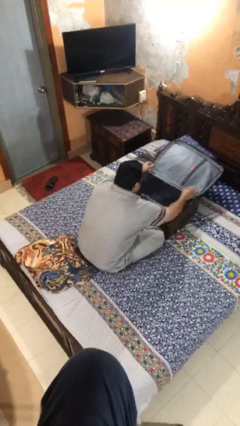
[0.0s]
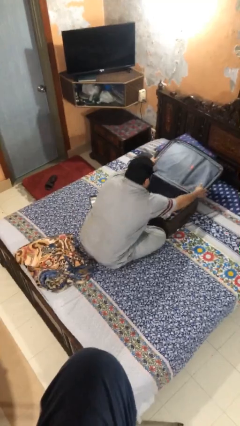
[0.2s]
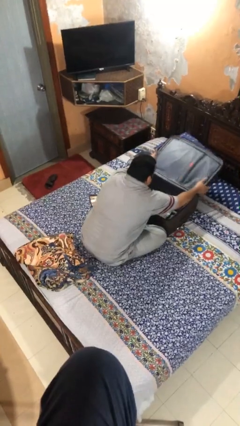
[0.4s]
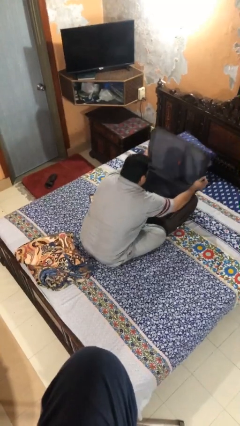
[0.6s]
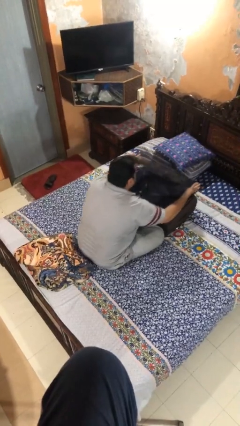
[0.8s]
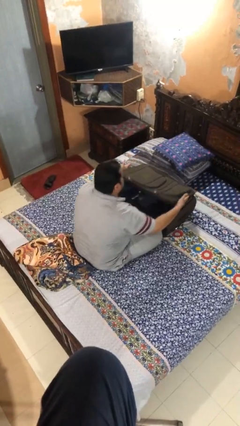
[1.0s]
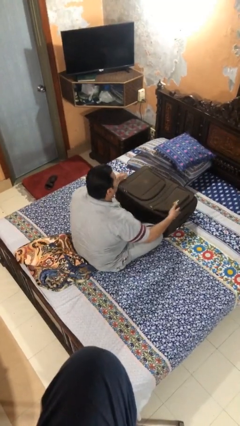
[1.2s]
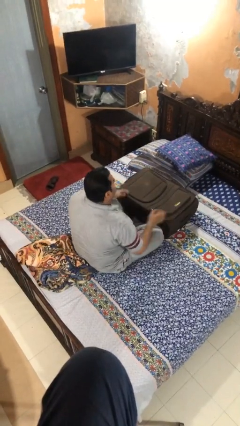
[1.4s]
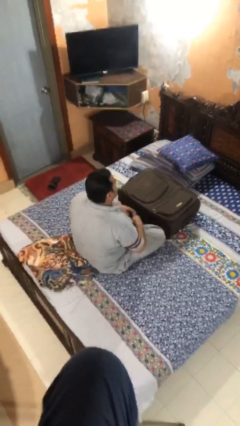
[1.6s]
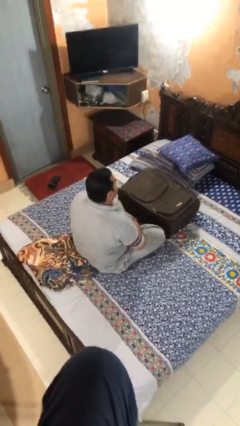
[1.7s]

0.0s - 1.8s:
person closes suitcase

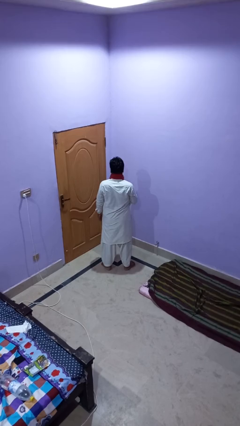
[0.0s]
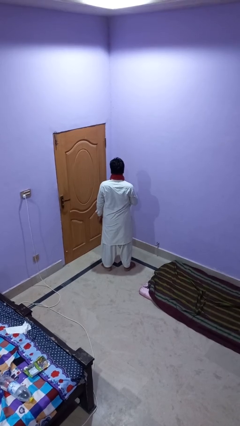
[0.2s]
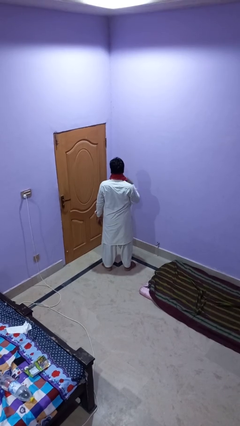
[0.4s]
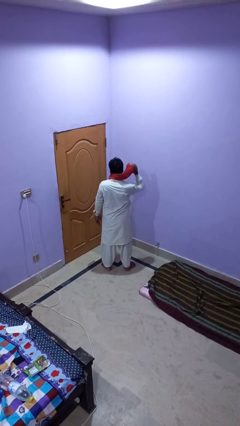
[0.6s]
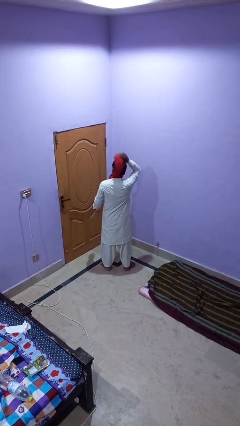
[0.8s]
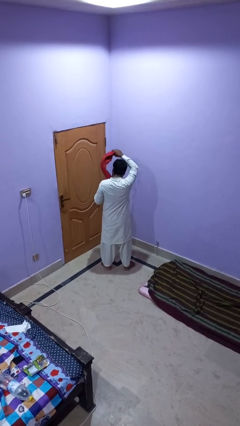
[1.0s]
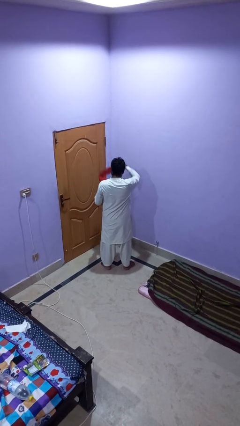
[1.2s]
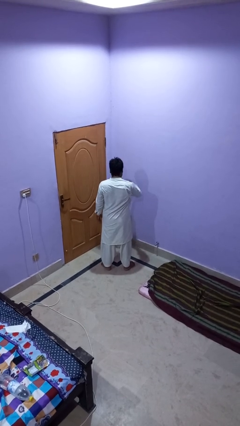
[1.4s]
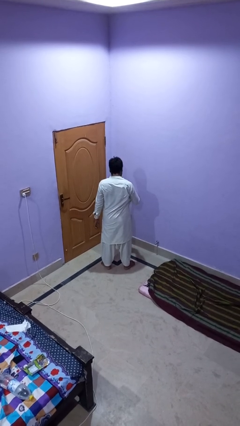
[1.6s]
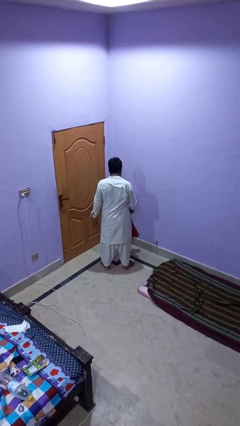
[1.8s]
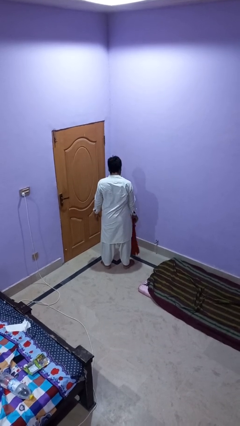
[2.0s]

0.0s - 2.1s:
person takes off scarf

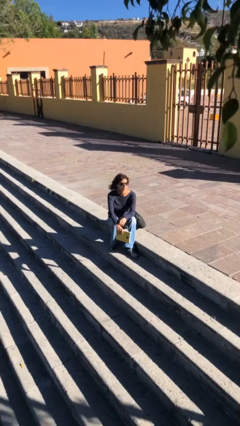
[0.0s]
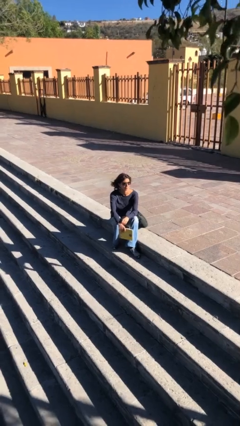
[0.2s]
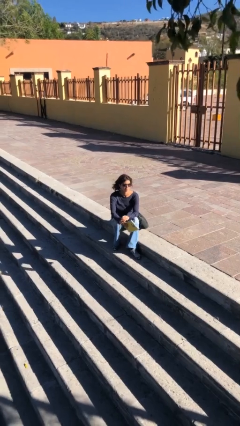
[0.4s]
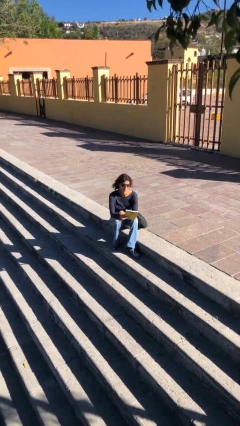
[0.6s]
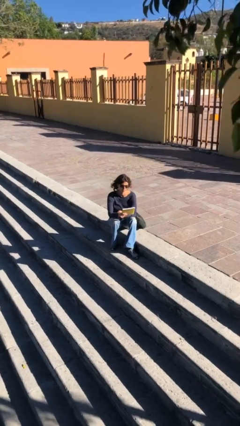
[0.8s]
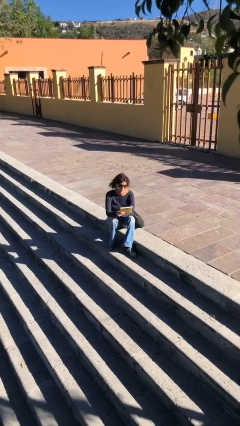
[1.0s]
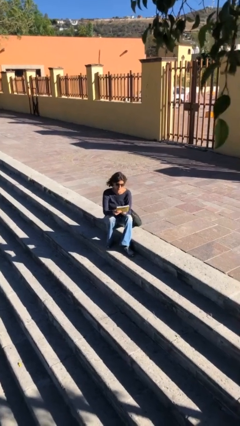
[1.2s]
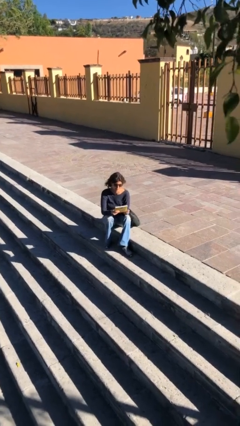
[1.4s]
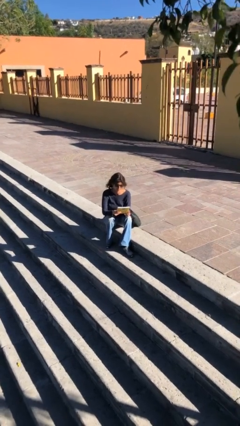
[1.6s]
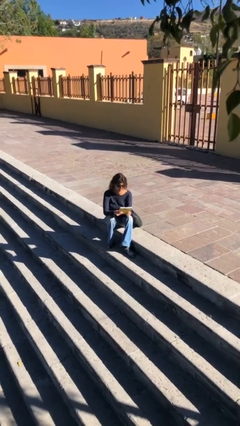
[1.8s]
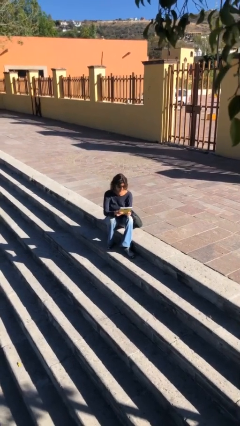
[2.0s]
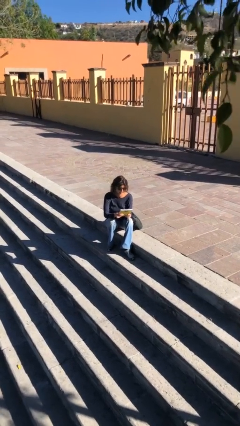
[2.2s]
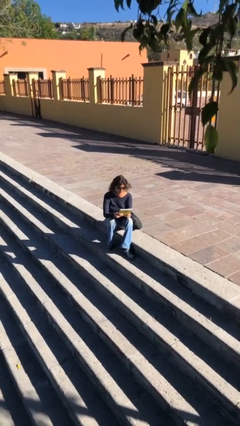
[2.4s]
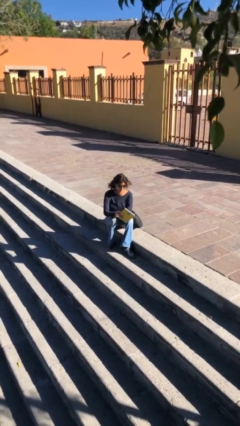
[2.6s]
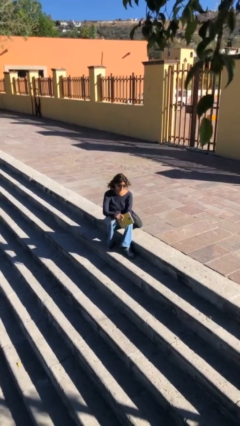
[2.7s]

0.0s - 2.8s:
person reads document

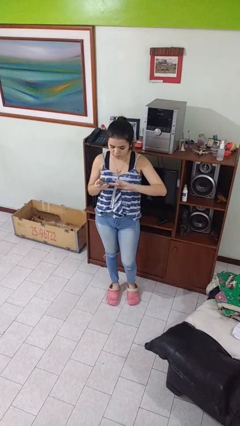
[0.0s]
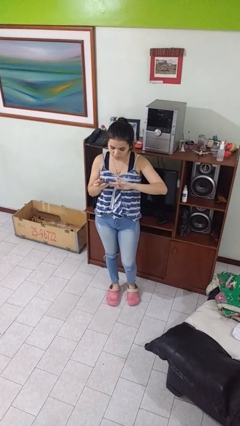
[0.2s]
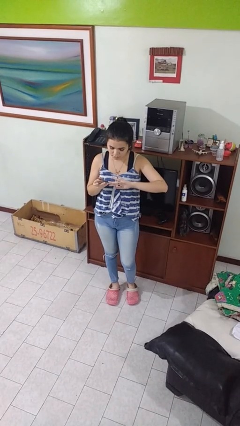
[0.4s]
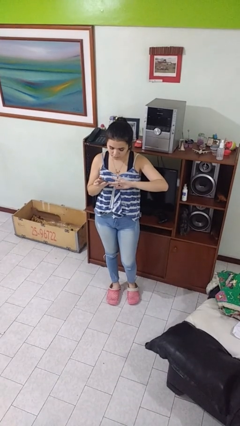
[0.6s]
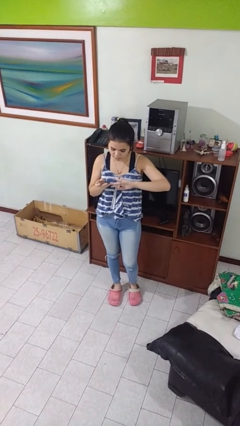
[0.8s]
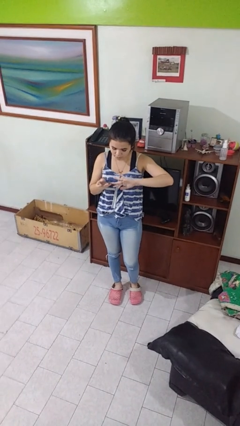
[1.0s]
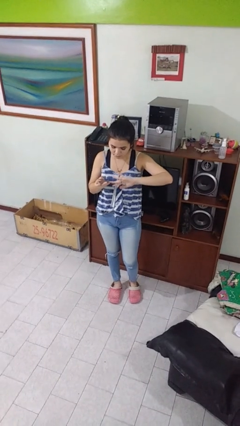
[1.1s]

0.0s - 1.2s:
person clips fingernails

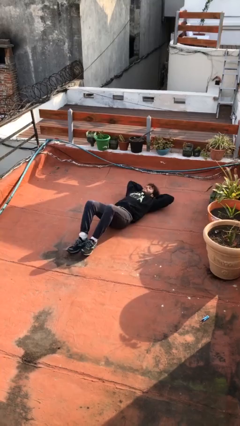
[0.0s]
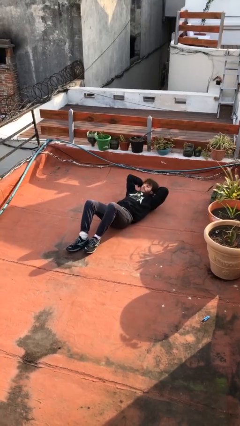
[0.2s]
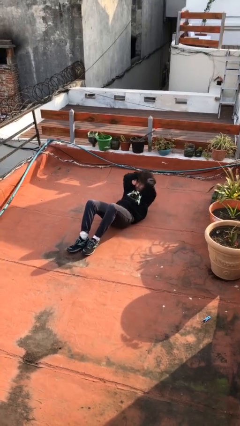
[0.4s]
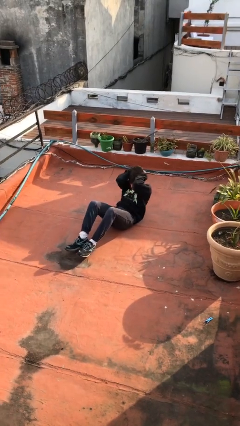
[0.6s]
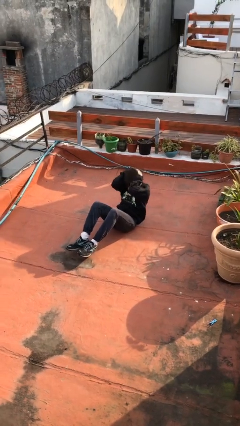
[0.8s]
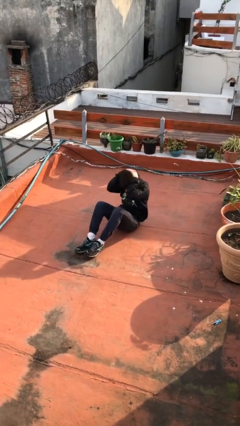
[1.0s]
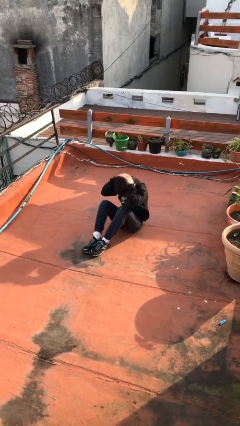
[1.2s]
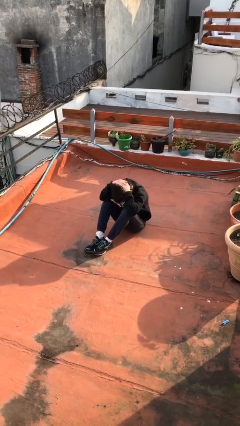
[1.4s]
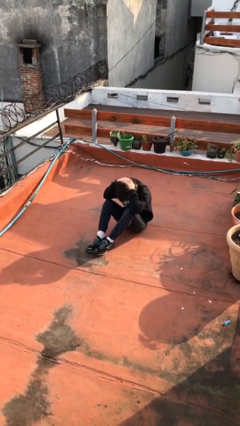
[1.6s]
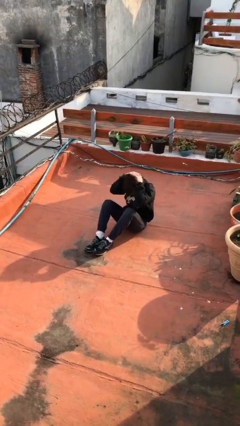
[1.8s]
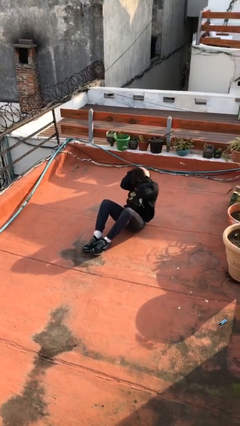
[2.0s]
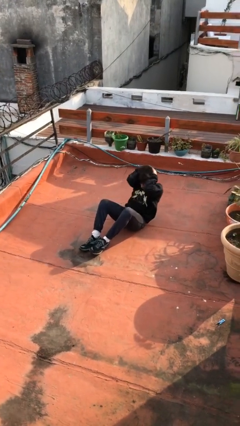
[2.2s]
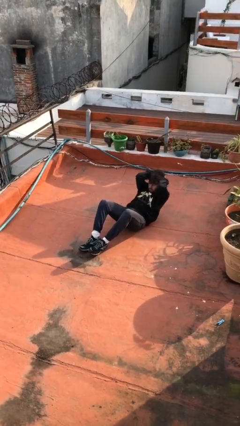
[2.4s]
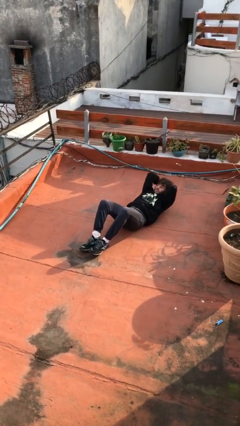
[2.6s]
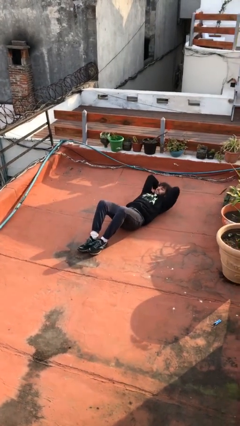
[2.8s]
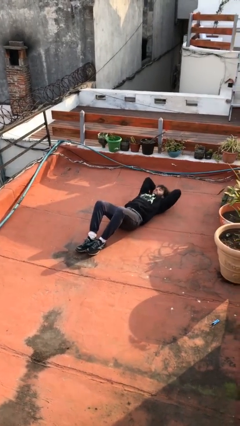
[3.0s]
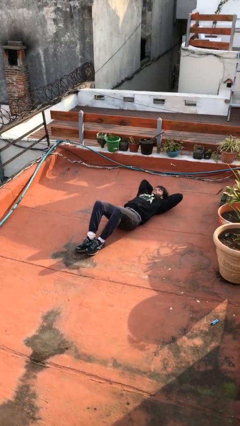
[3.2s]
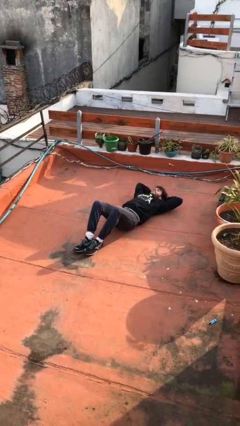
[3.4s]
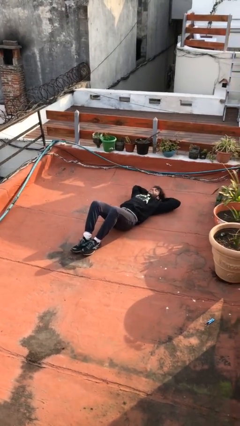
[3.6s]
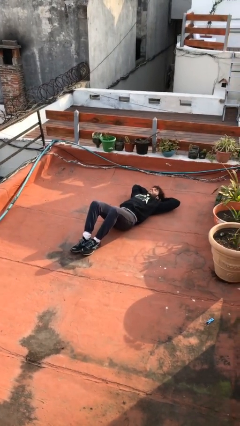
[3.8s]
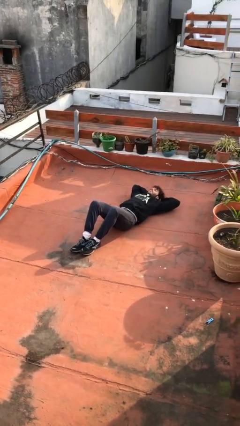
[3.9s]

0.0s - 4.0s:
person exercises with situp

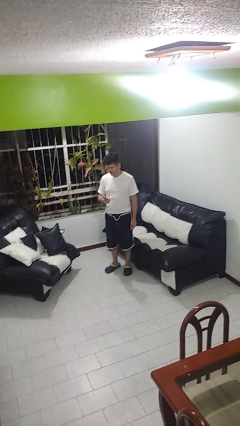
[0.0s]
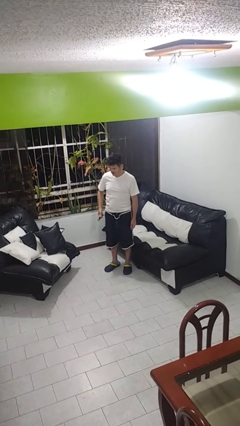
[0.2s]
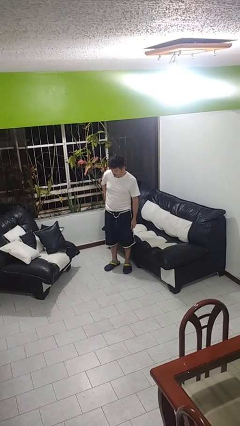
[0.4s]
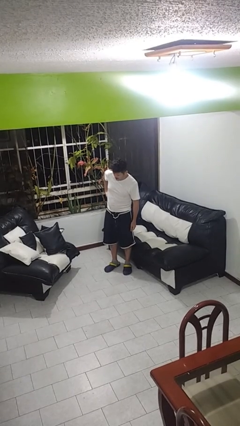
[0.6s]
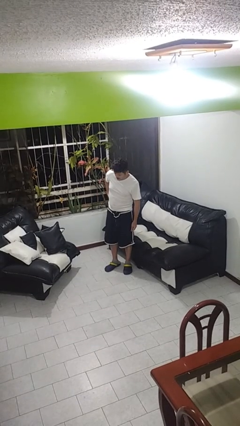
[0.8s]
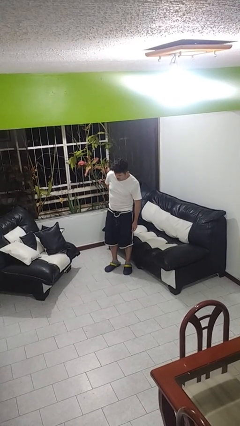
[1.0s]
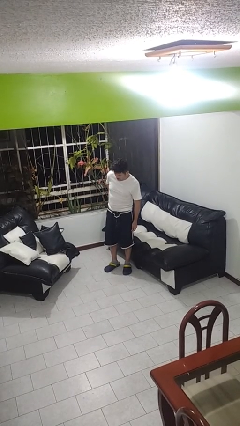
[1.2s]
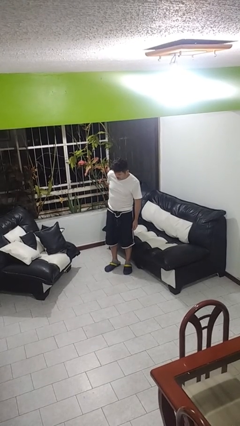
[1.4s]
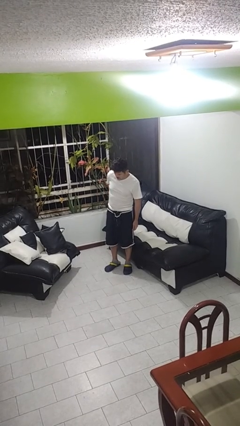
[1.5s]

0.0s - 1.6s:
person puts phone into pocket

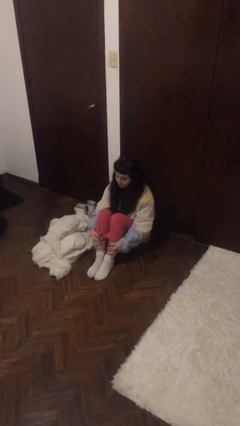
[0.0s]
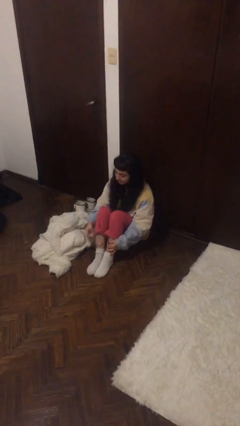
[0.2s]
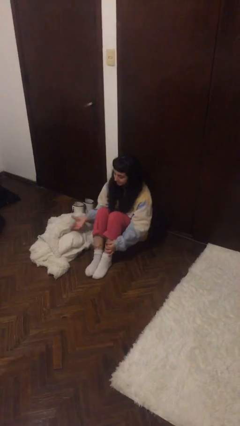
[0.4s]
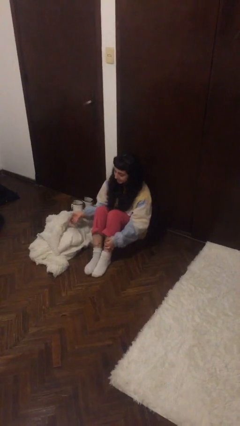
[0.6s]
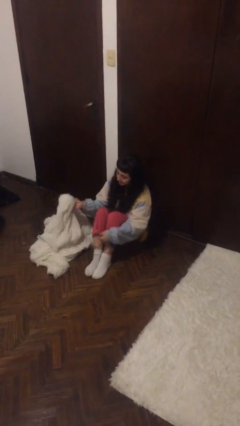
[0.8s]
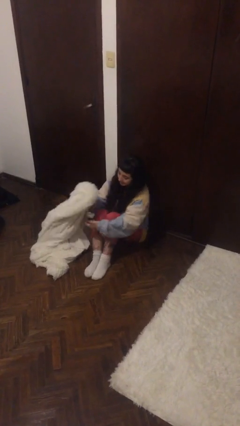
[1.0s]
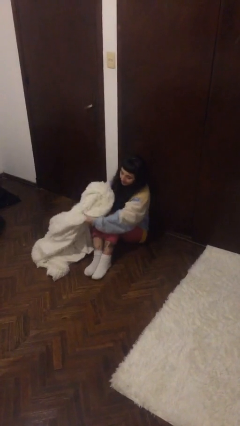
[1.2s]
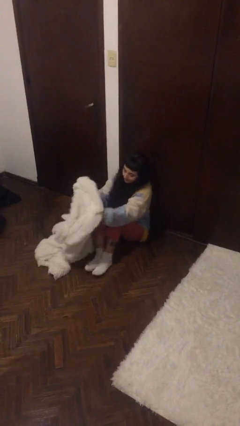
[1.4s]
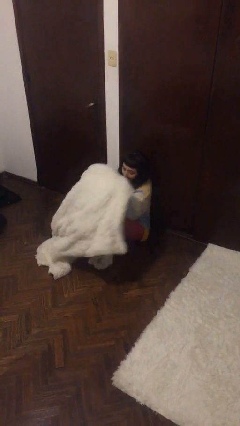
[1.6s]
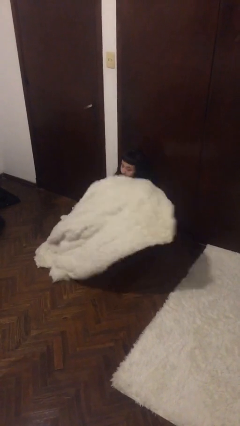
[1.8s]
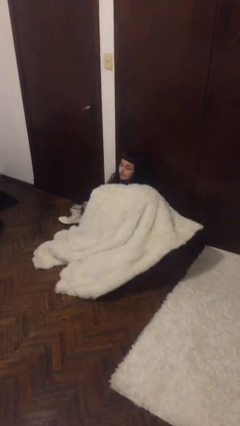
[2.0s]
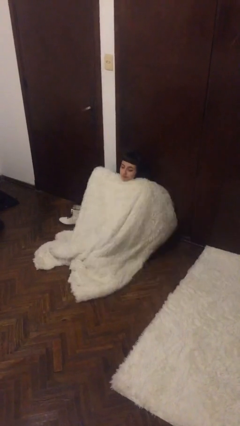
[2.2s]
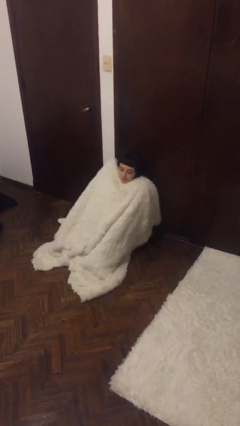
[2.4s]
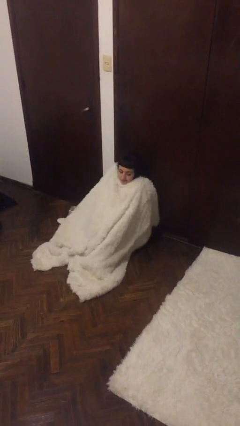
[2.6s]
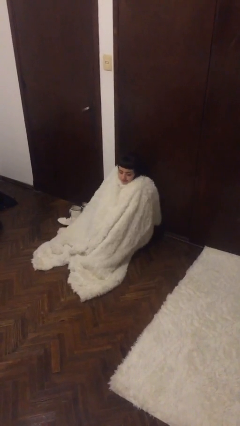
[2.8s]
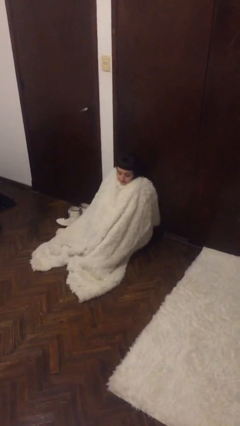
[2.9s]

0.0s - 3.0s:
person covers with blanket

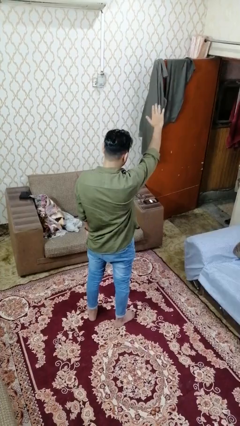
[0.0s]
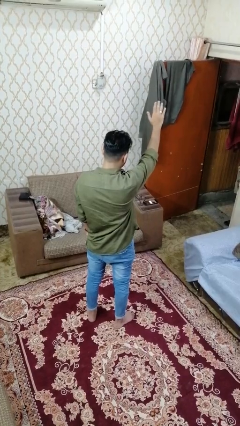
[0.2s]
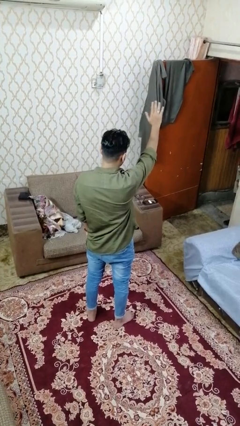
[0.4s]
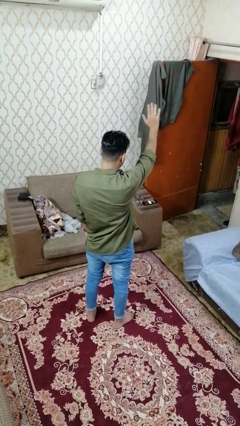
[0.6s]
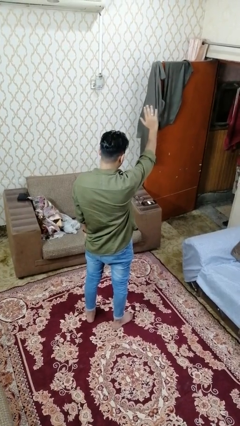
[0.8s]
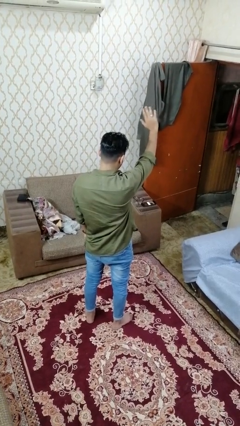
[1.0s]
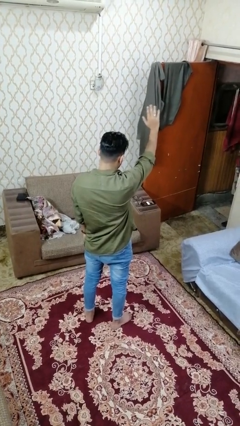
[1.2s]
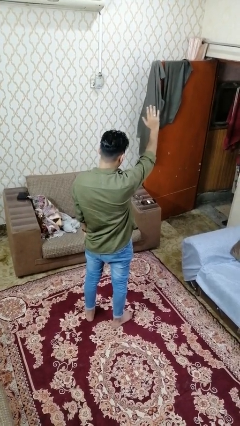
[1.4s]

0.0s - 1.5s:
person carries furniture
